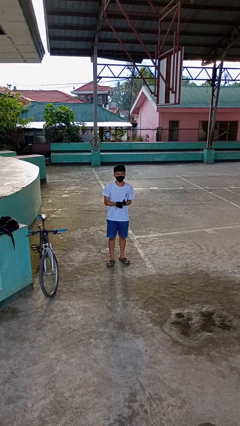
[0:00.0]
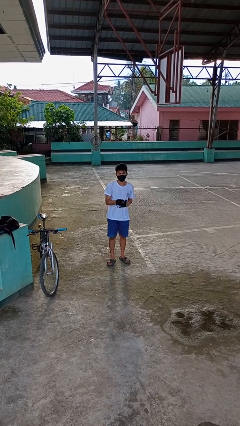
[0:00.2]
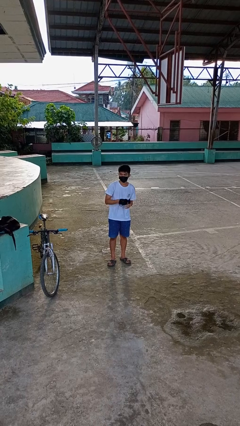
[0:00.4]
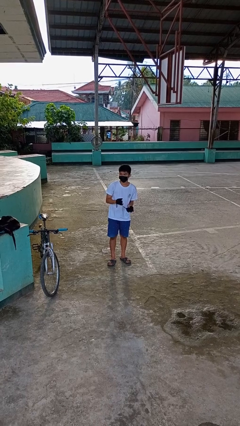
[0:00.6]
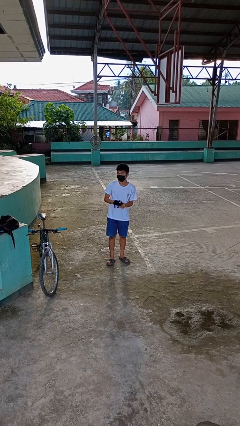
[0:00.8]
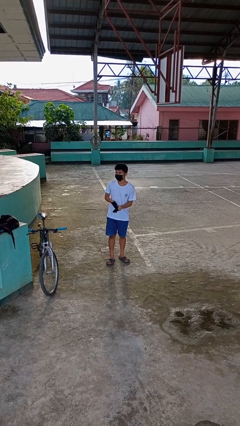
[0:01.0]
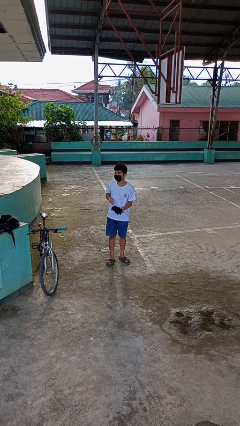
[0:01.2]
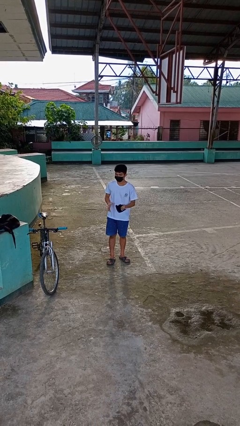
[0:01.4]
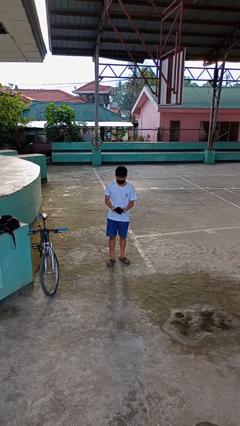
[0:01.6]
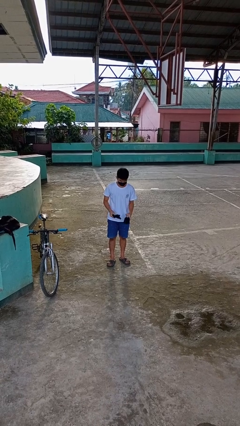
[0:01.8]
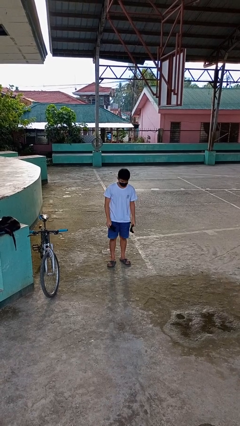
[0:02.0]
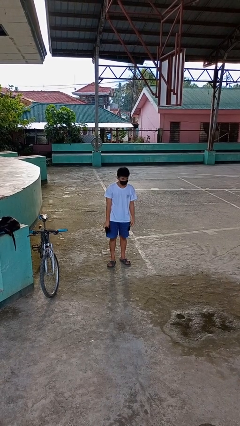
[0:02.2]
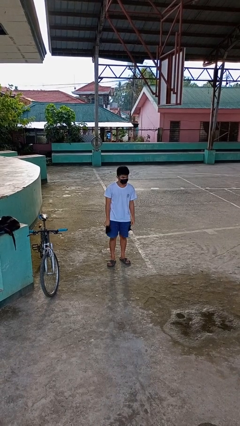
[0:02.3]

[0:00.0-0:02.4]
person takes off gloves

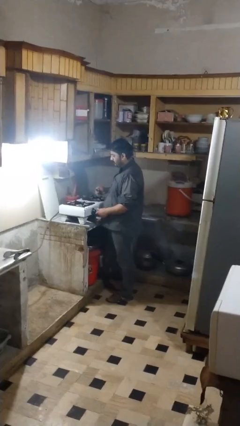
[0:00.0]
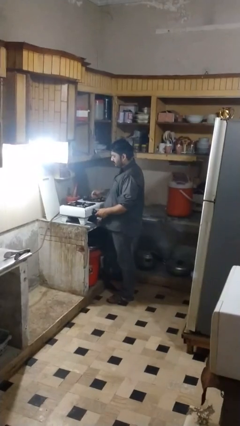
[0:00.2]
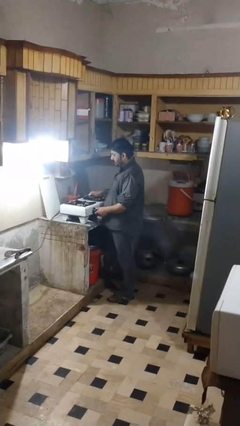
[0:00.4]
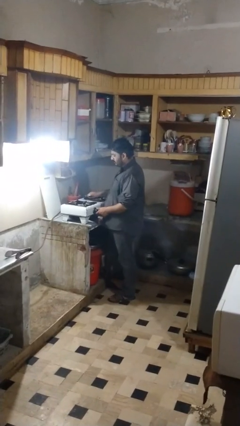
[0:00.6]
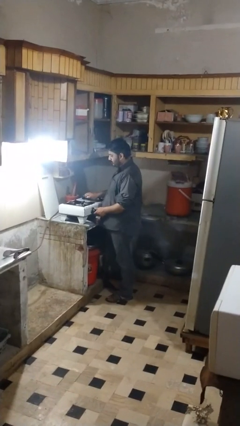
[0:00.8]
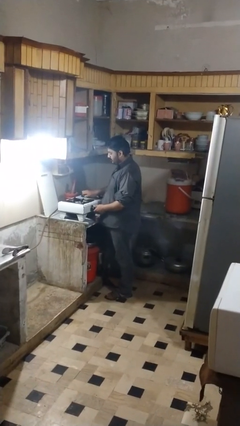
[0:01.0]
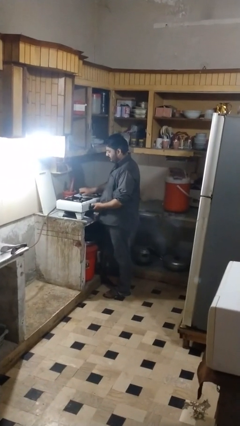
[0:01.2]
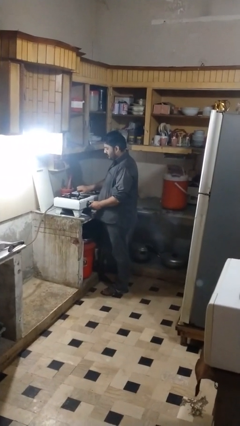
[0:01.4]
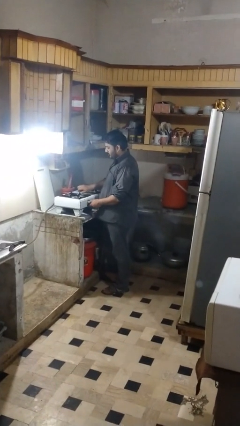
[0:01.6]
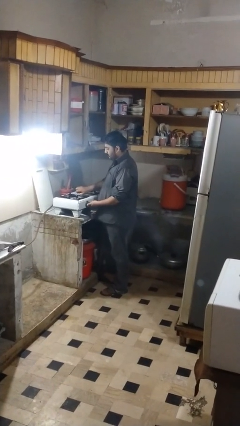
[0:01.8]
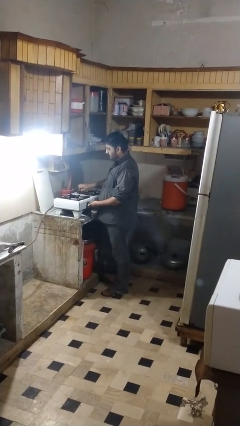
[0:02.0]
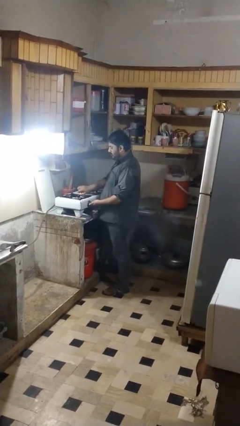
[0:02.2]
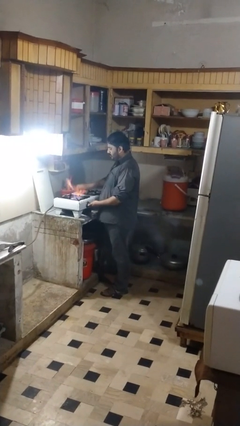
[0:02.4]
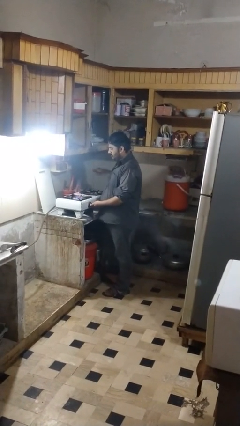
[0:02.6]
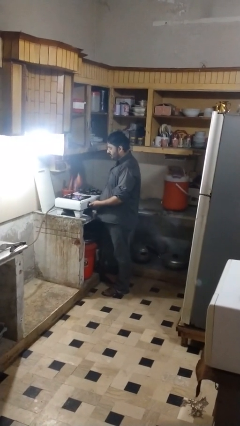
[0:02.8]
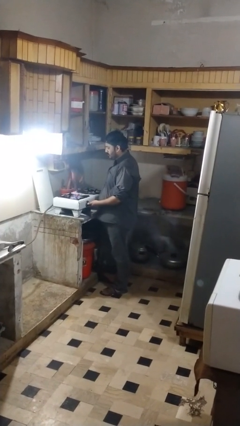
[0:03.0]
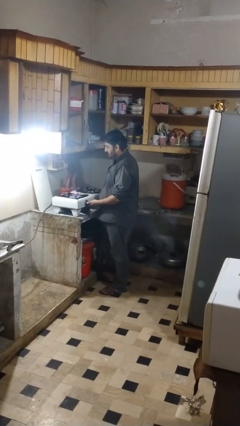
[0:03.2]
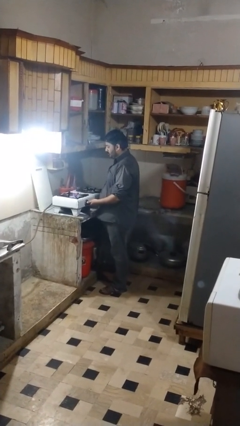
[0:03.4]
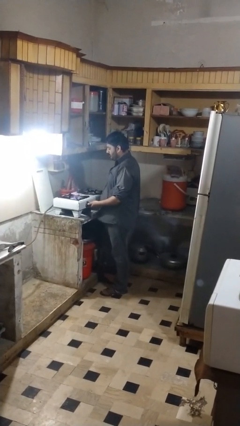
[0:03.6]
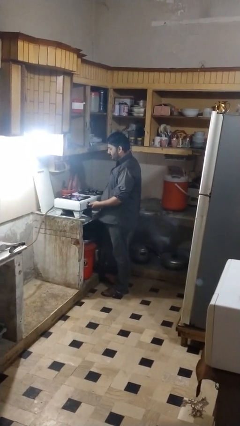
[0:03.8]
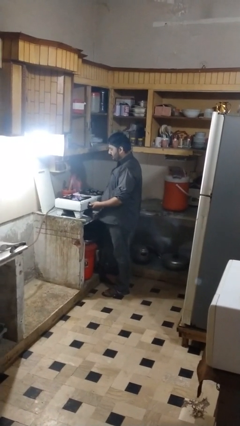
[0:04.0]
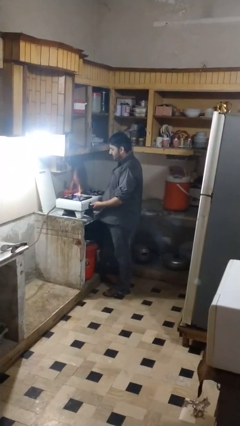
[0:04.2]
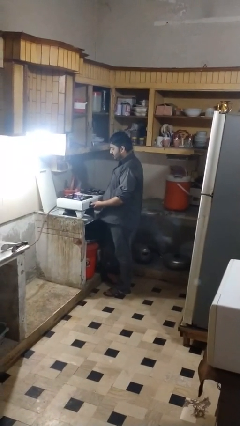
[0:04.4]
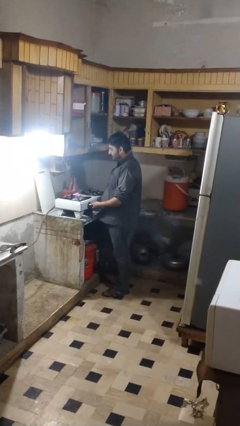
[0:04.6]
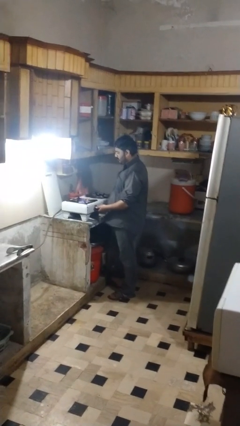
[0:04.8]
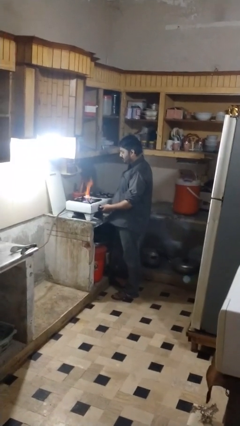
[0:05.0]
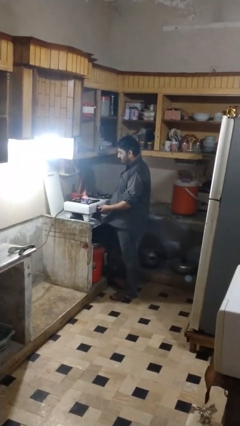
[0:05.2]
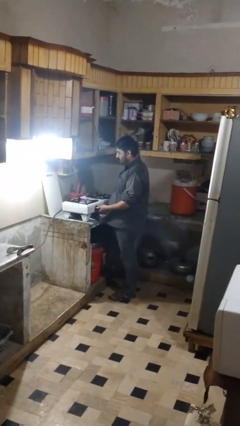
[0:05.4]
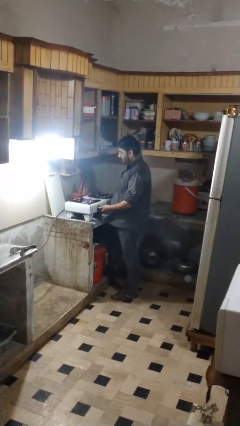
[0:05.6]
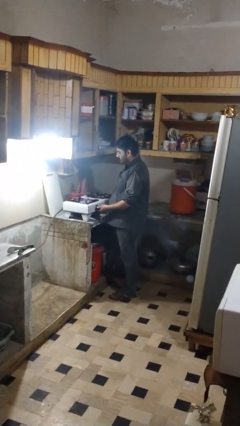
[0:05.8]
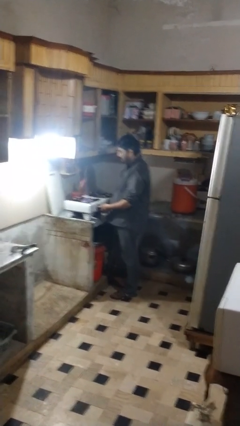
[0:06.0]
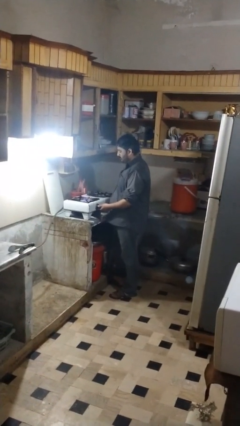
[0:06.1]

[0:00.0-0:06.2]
person turns on stovetop

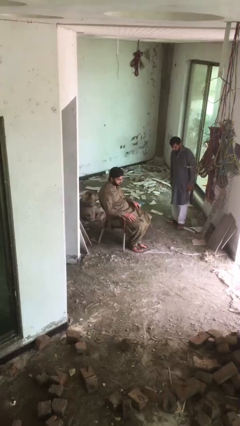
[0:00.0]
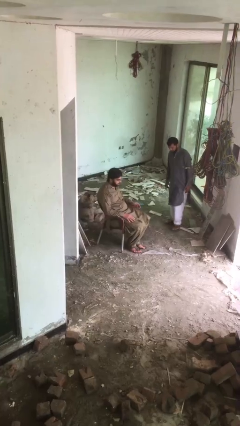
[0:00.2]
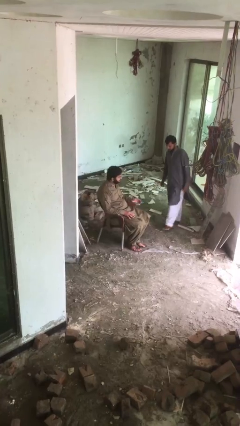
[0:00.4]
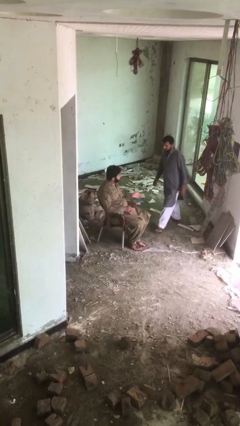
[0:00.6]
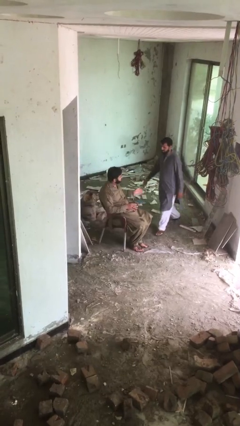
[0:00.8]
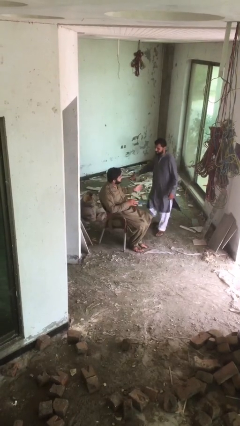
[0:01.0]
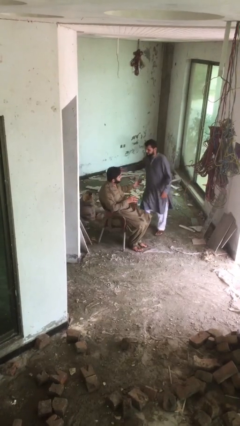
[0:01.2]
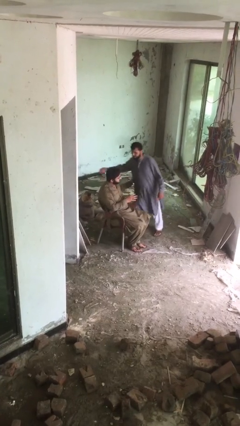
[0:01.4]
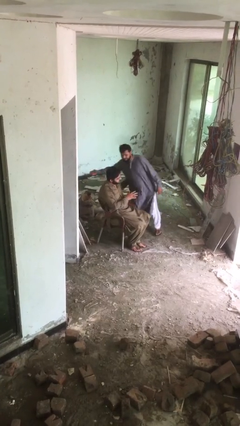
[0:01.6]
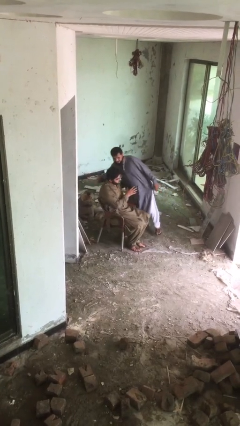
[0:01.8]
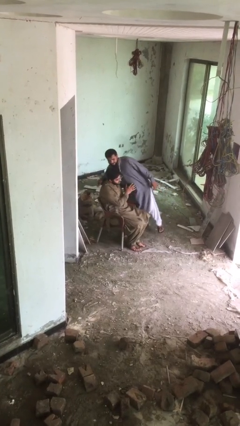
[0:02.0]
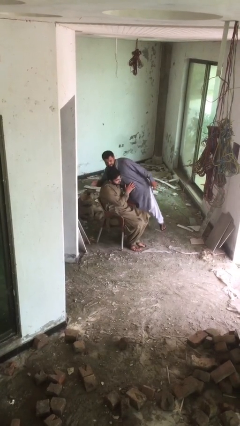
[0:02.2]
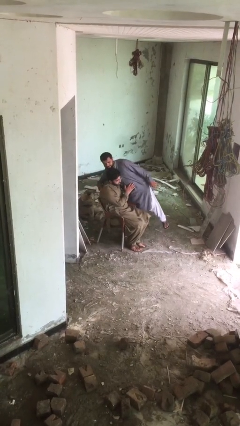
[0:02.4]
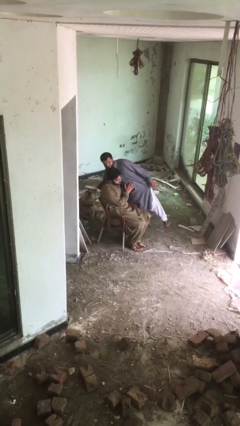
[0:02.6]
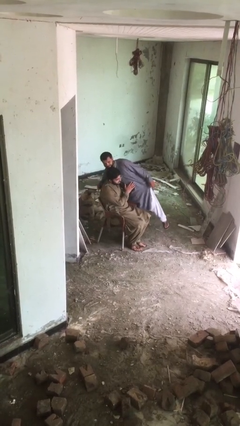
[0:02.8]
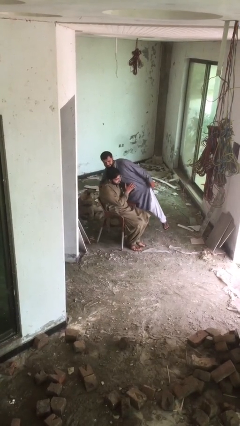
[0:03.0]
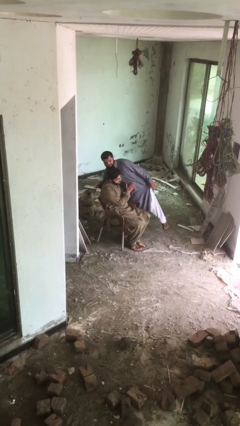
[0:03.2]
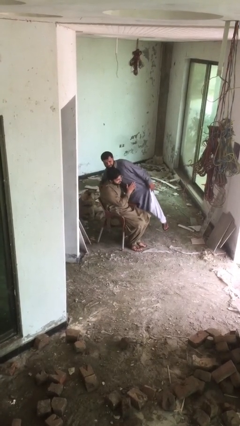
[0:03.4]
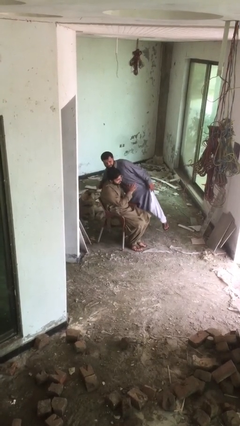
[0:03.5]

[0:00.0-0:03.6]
person embraces person

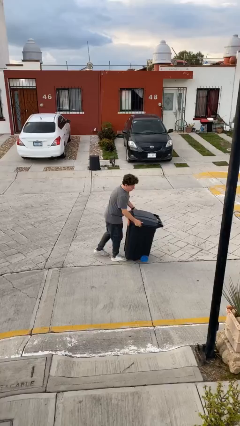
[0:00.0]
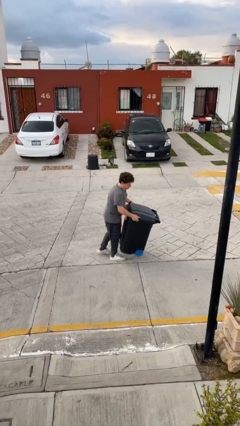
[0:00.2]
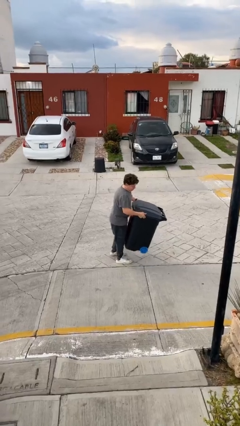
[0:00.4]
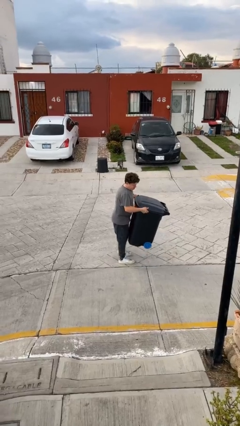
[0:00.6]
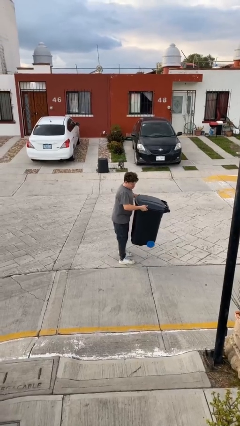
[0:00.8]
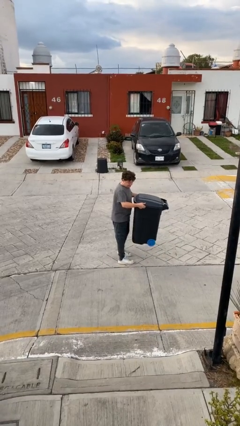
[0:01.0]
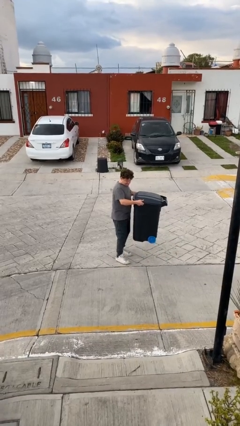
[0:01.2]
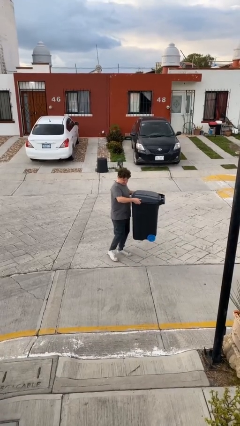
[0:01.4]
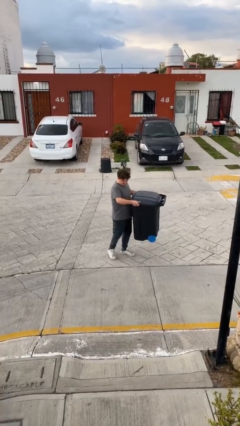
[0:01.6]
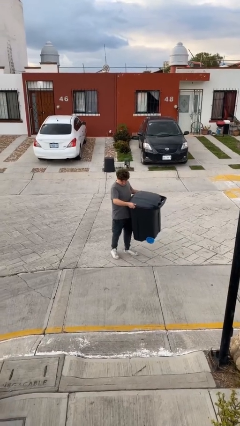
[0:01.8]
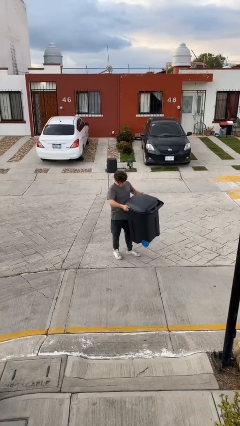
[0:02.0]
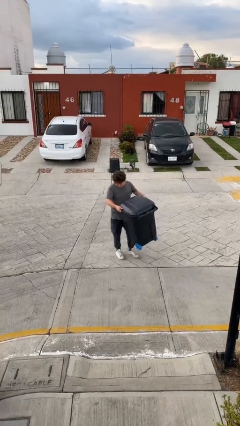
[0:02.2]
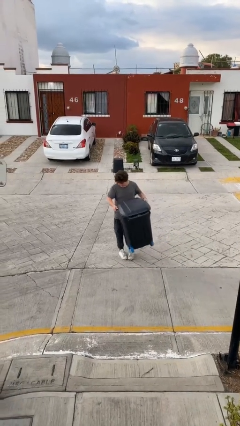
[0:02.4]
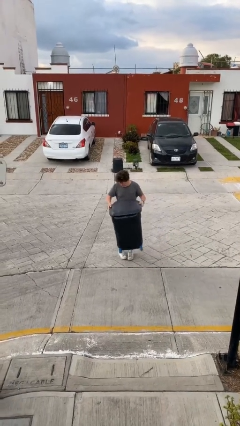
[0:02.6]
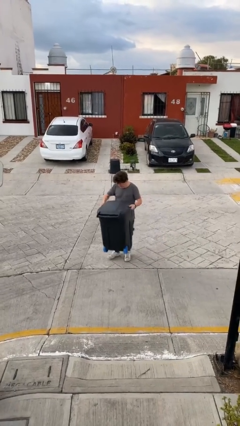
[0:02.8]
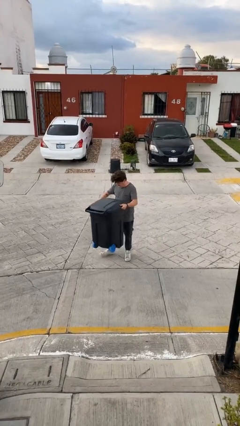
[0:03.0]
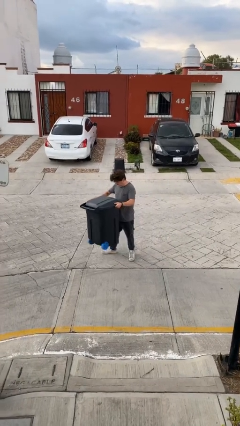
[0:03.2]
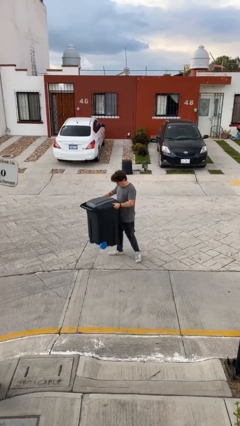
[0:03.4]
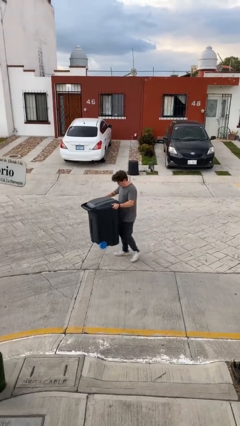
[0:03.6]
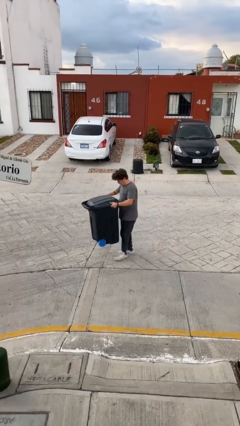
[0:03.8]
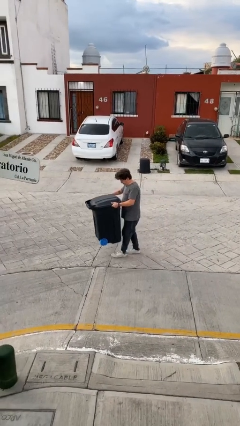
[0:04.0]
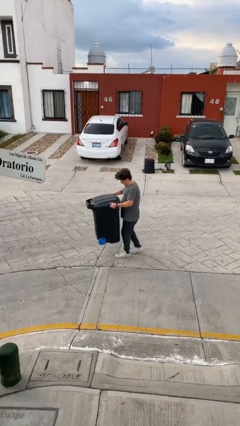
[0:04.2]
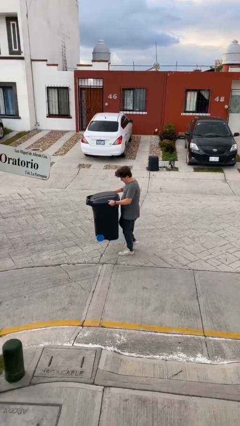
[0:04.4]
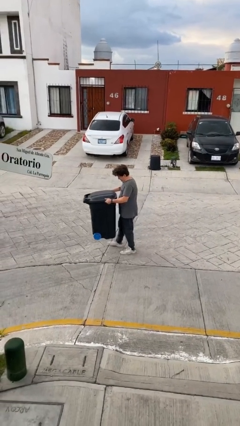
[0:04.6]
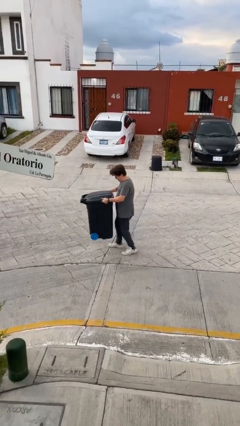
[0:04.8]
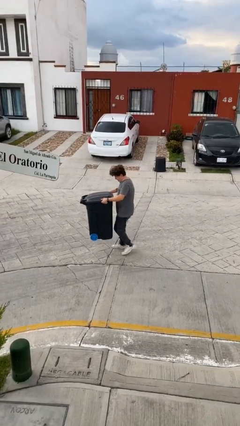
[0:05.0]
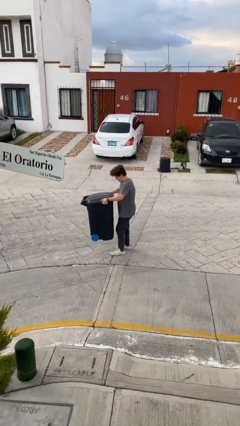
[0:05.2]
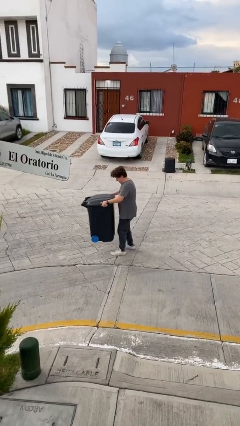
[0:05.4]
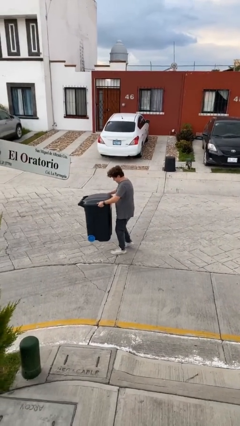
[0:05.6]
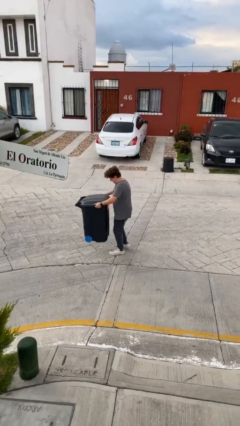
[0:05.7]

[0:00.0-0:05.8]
person carries heavy object
